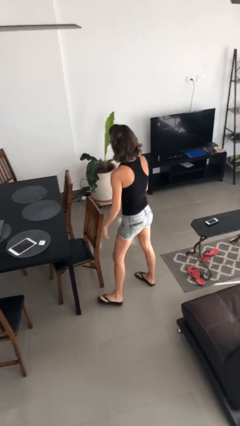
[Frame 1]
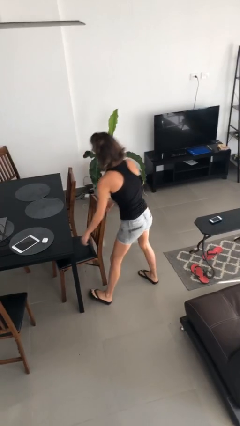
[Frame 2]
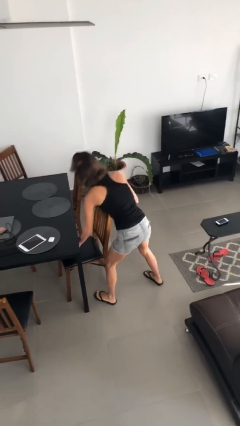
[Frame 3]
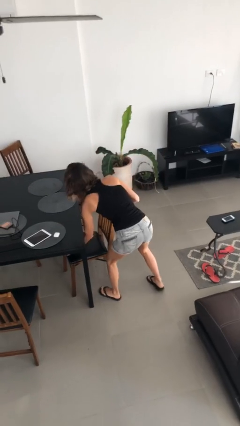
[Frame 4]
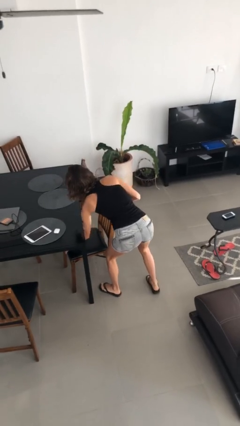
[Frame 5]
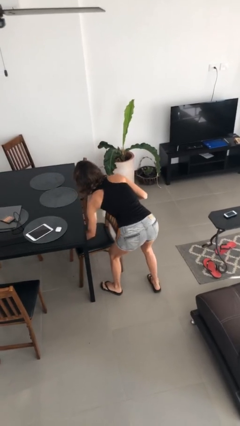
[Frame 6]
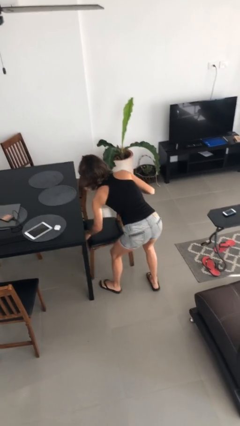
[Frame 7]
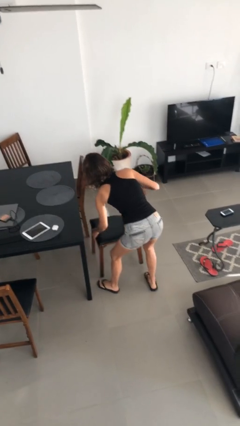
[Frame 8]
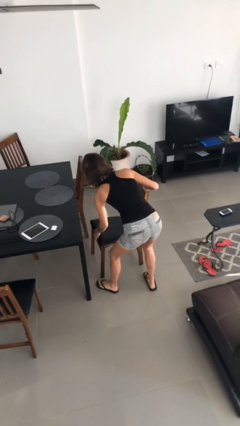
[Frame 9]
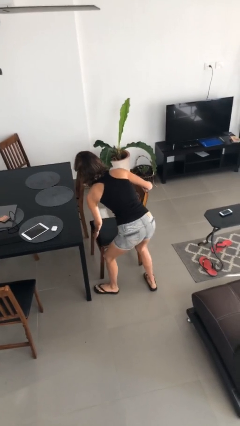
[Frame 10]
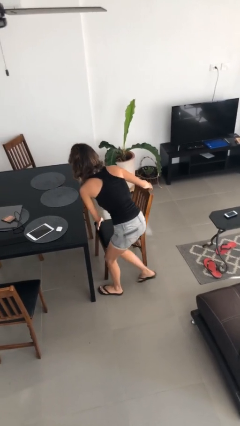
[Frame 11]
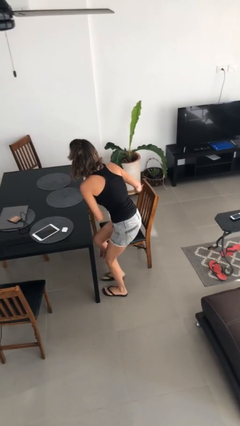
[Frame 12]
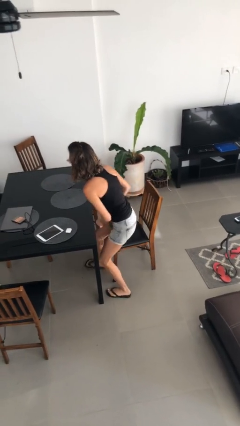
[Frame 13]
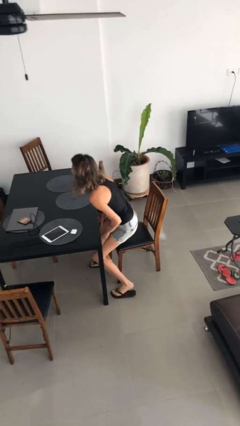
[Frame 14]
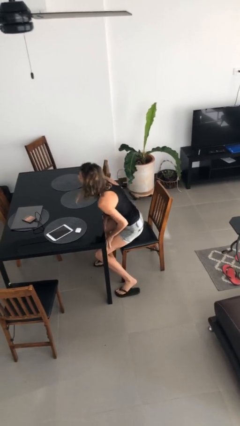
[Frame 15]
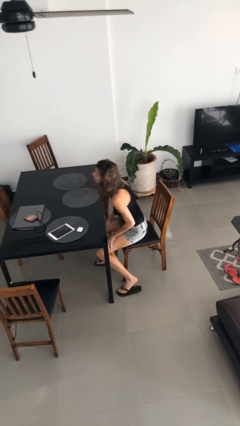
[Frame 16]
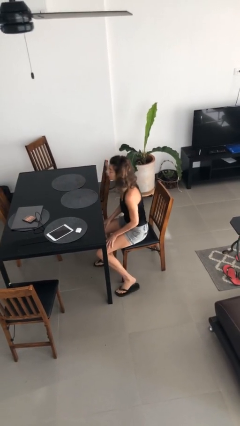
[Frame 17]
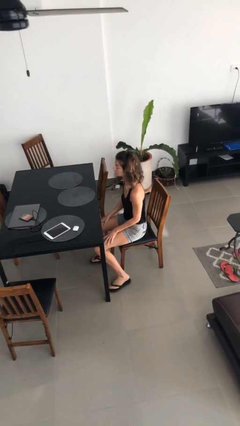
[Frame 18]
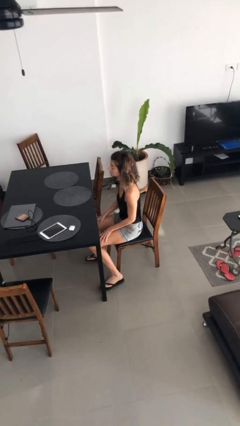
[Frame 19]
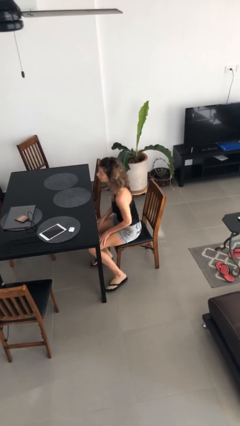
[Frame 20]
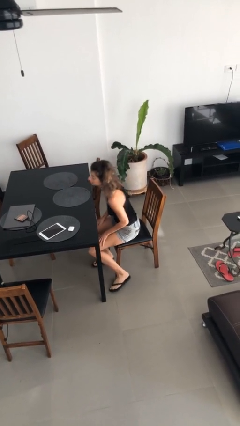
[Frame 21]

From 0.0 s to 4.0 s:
person sits down

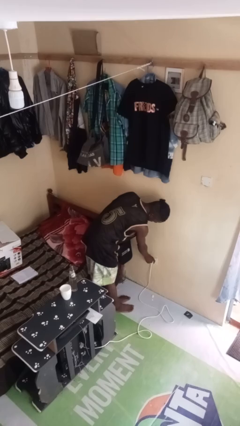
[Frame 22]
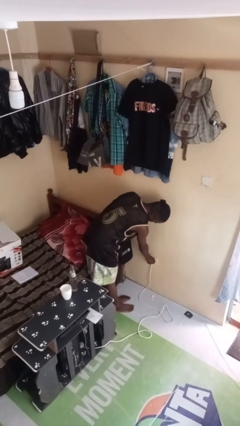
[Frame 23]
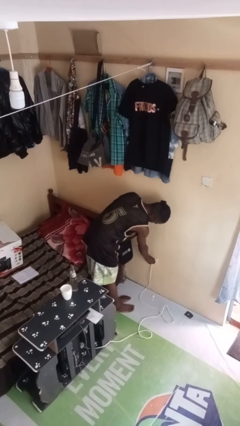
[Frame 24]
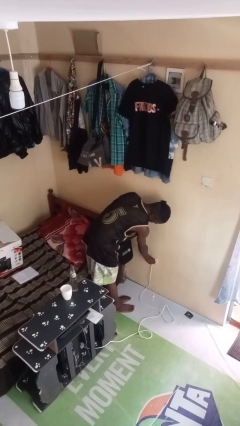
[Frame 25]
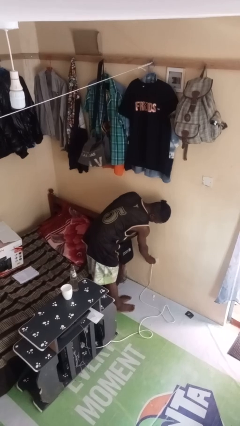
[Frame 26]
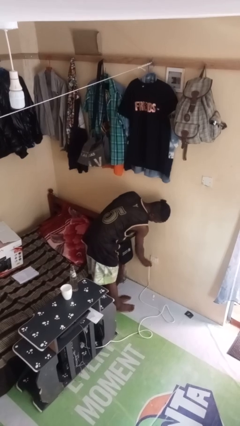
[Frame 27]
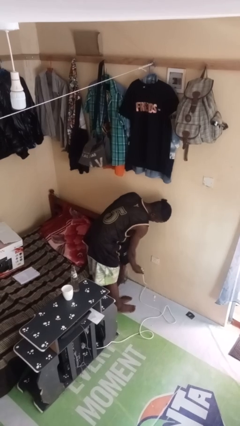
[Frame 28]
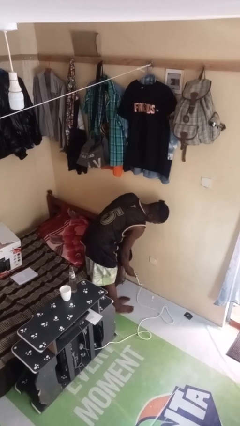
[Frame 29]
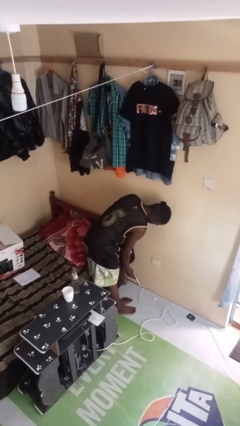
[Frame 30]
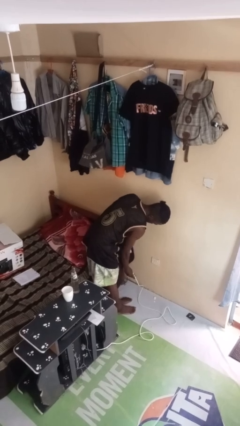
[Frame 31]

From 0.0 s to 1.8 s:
person unplugs from electrical socket

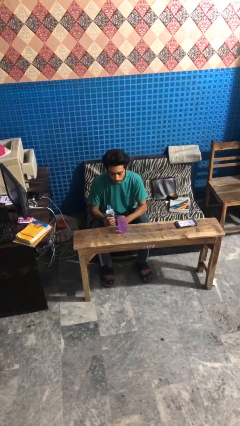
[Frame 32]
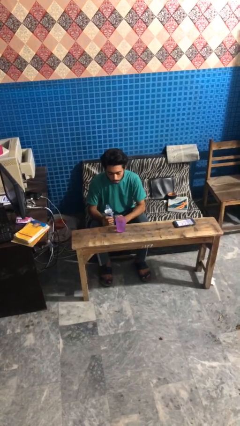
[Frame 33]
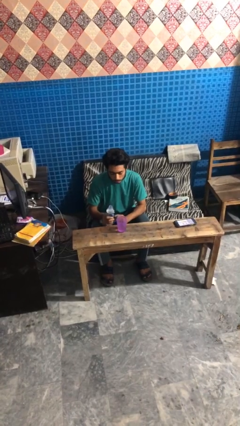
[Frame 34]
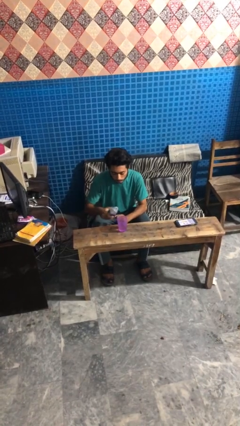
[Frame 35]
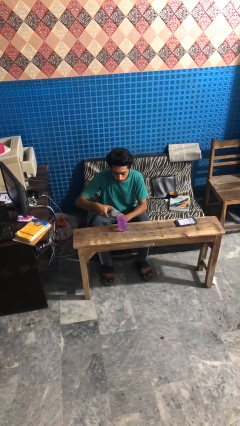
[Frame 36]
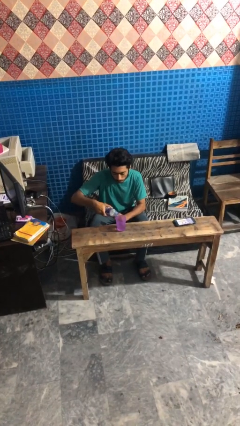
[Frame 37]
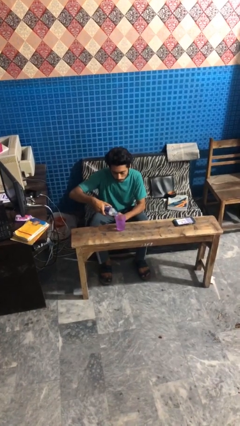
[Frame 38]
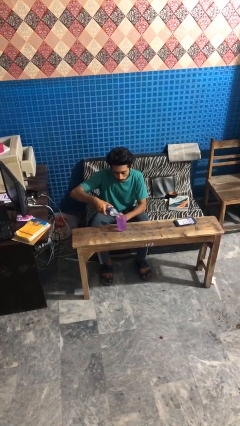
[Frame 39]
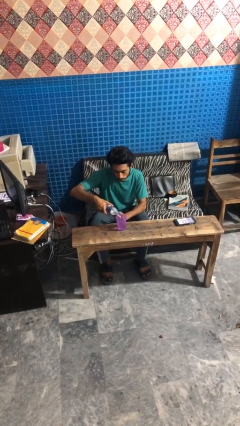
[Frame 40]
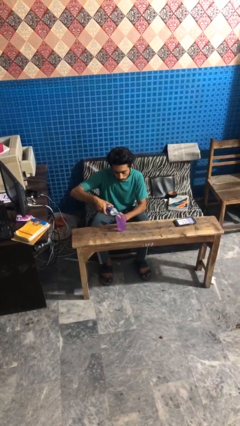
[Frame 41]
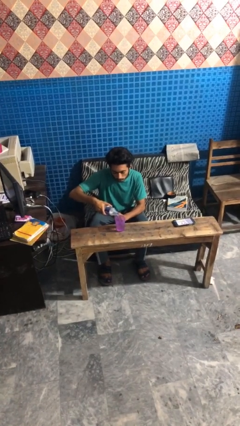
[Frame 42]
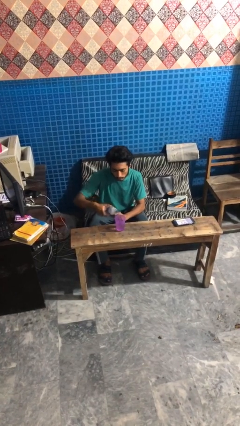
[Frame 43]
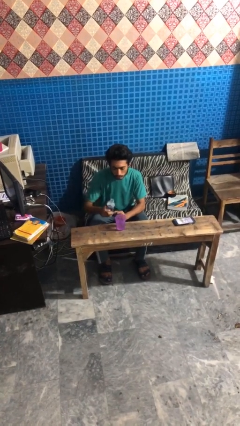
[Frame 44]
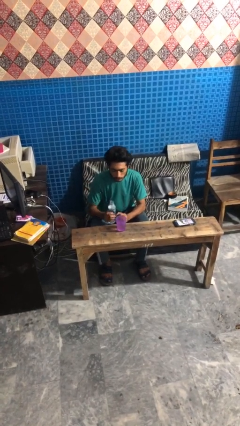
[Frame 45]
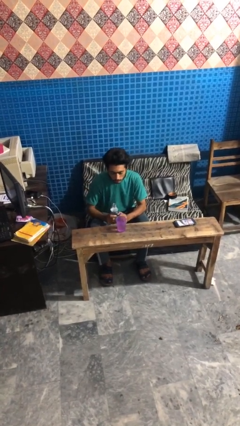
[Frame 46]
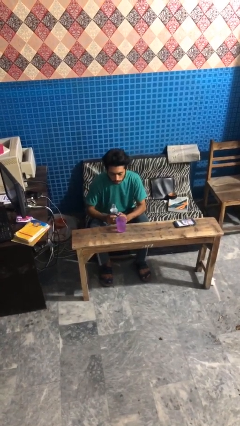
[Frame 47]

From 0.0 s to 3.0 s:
person pours liquid into cup

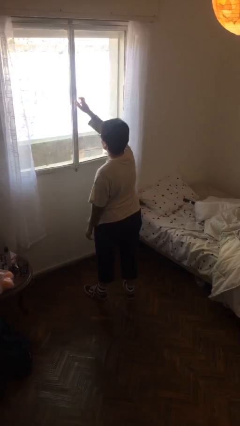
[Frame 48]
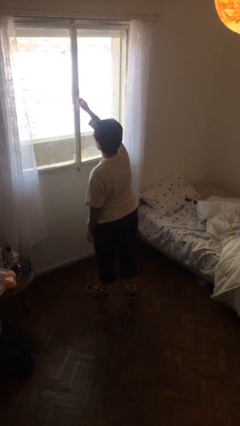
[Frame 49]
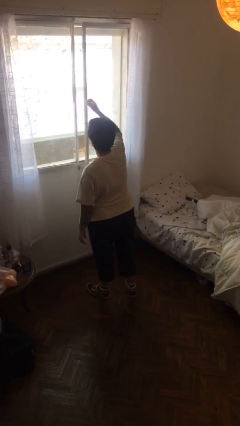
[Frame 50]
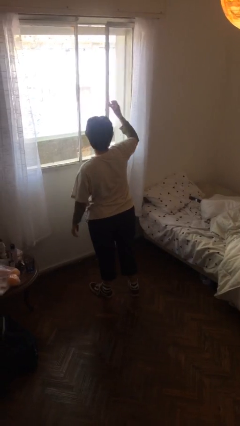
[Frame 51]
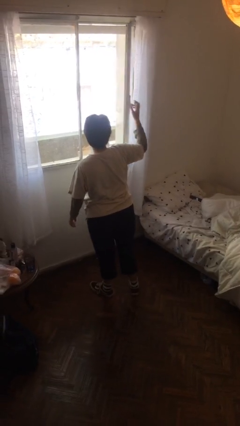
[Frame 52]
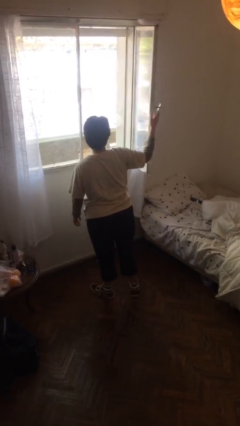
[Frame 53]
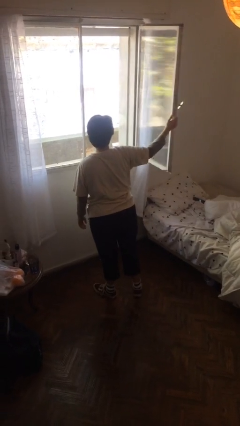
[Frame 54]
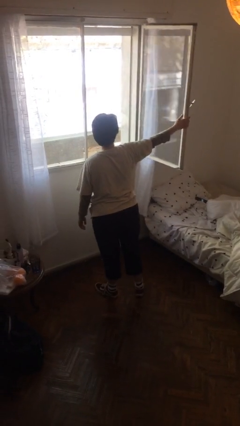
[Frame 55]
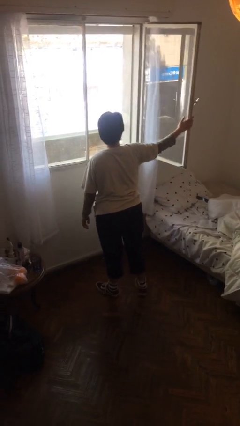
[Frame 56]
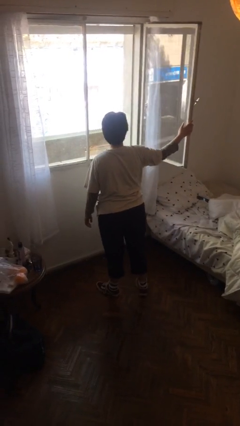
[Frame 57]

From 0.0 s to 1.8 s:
person opens home window

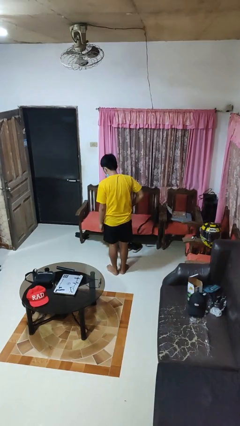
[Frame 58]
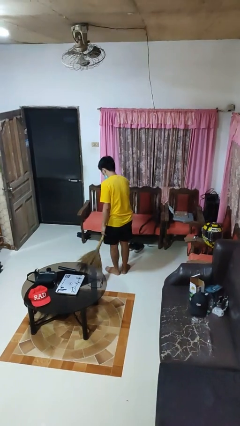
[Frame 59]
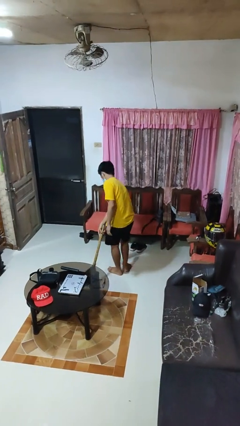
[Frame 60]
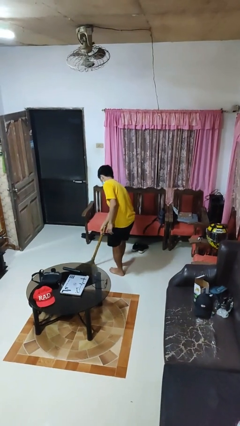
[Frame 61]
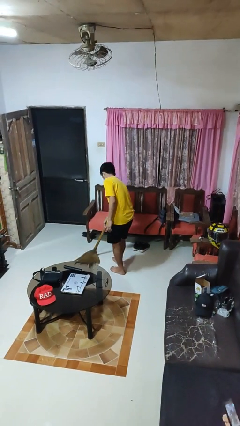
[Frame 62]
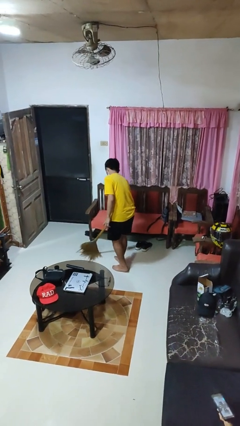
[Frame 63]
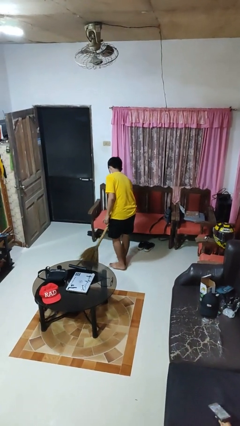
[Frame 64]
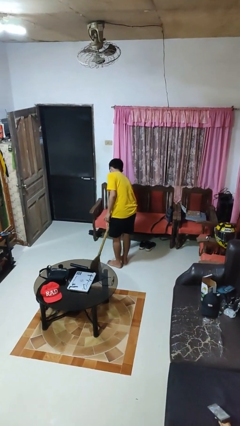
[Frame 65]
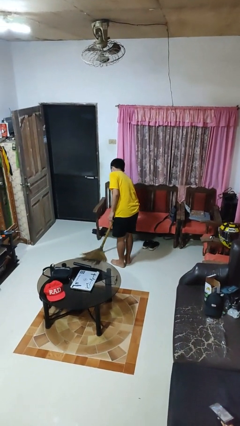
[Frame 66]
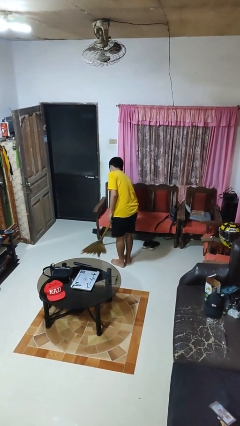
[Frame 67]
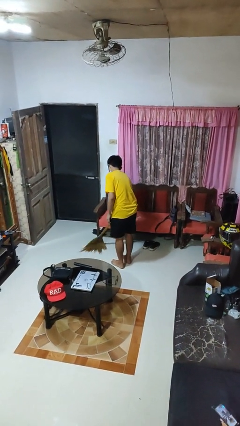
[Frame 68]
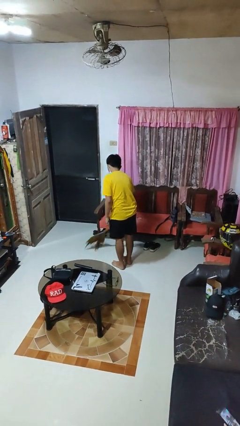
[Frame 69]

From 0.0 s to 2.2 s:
person sweeps floor

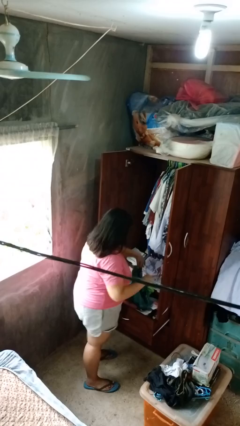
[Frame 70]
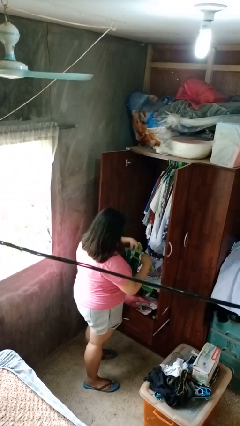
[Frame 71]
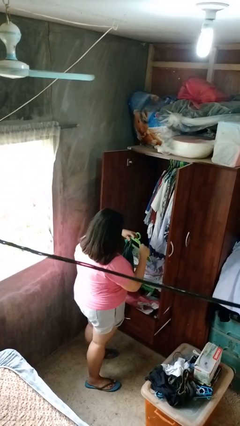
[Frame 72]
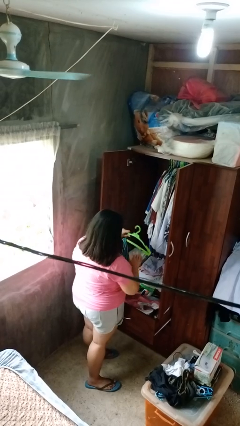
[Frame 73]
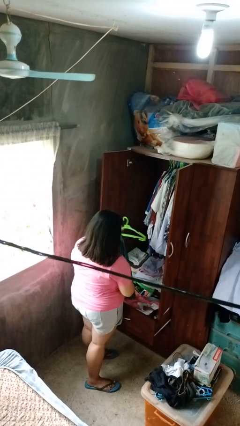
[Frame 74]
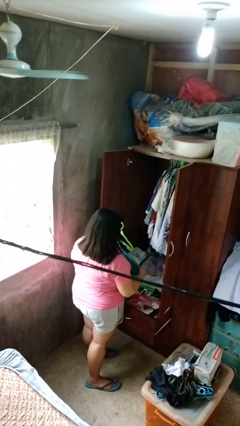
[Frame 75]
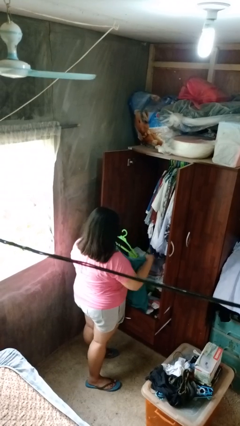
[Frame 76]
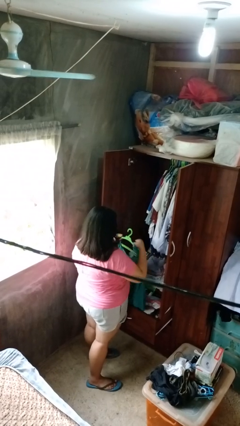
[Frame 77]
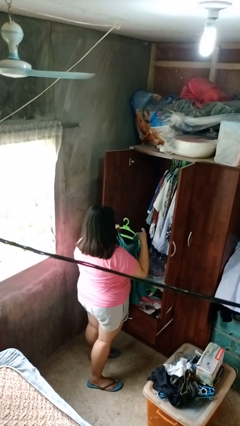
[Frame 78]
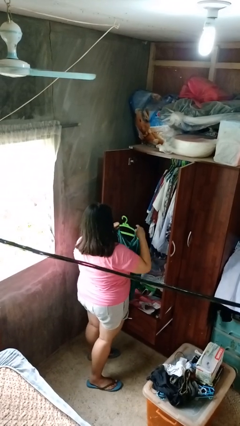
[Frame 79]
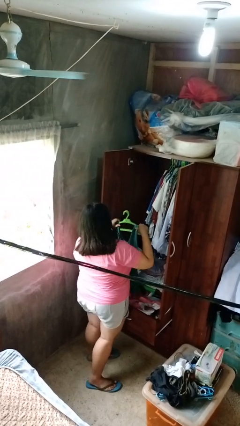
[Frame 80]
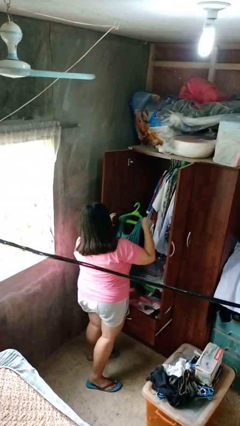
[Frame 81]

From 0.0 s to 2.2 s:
person puts clothes into closet

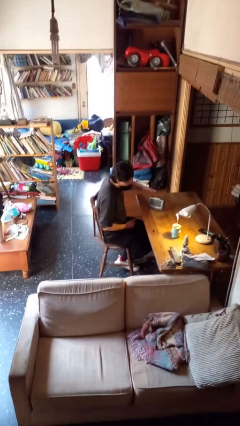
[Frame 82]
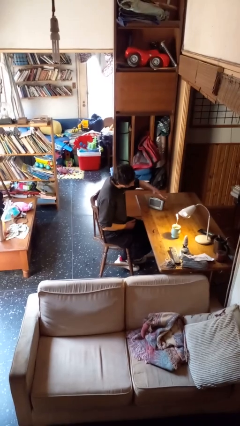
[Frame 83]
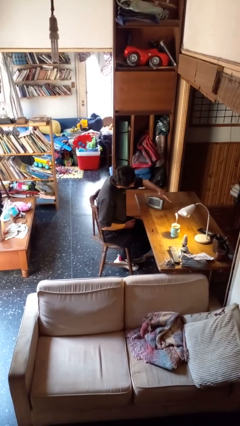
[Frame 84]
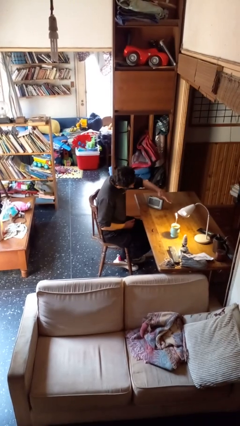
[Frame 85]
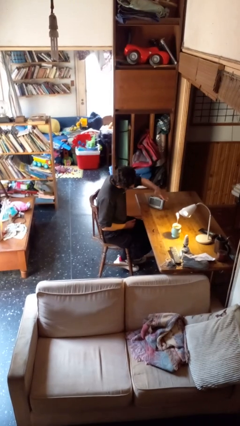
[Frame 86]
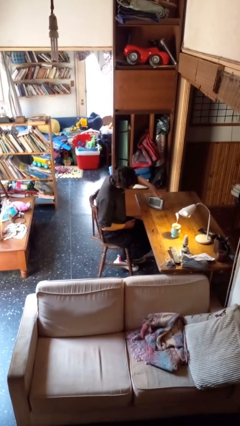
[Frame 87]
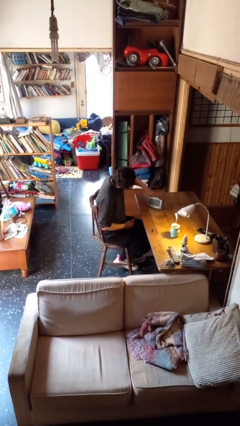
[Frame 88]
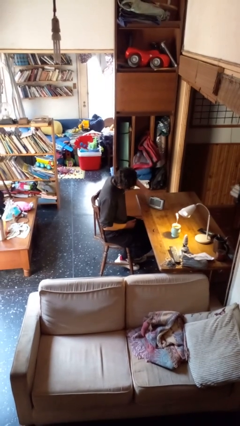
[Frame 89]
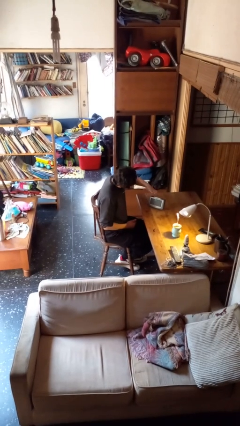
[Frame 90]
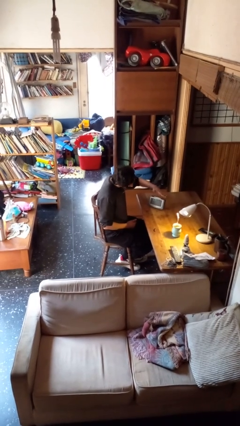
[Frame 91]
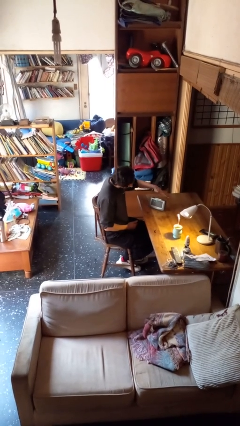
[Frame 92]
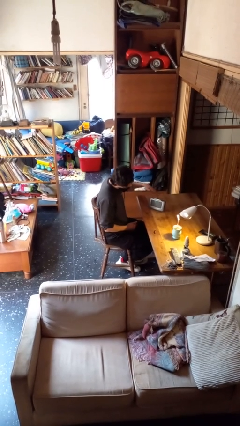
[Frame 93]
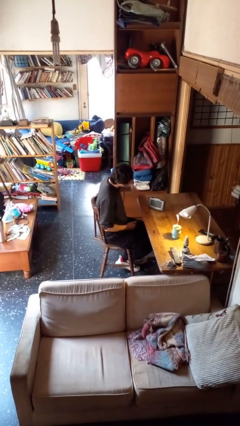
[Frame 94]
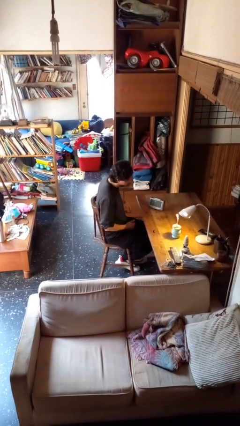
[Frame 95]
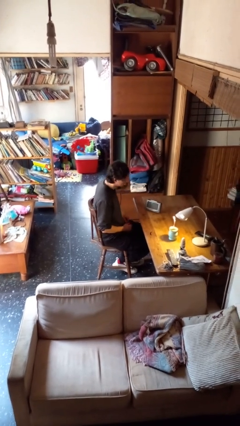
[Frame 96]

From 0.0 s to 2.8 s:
person waves hand over object
